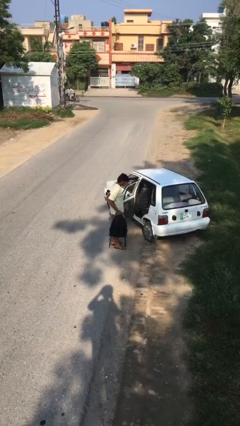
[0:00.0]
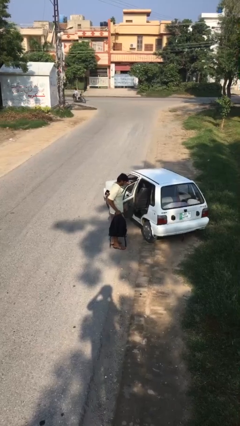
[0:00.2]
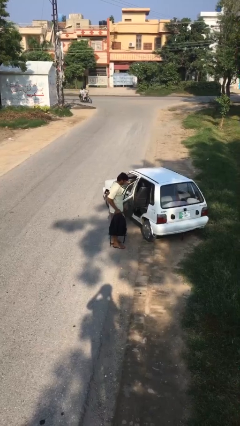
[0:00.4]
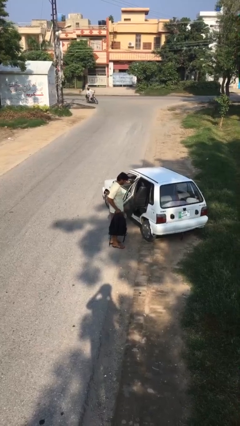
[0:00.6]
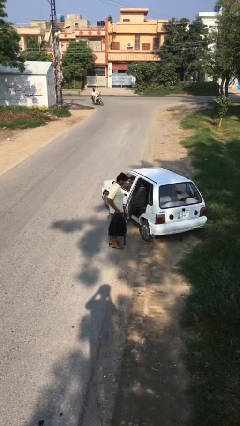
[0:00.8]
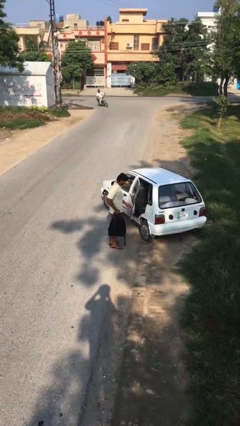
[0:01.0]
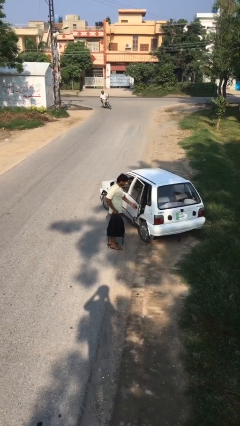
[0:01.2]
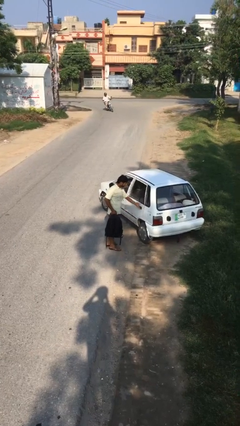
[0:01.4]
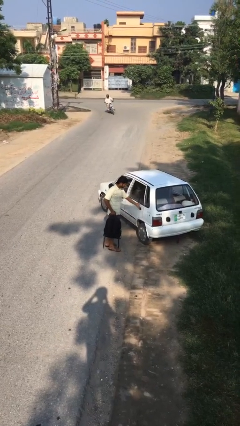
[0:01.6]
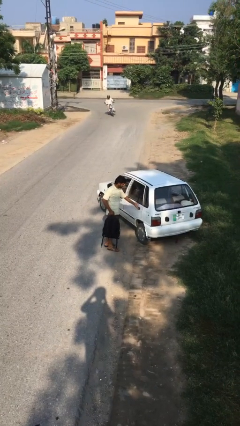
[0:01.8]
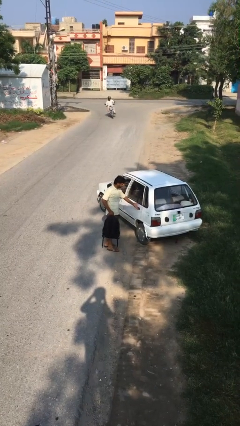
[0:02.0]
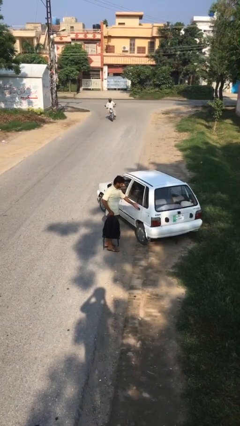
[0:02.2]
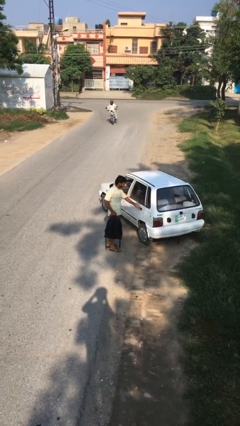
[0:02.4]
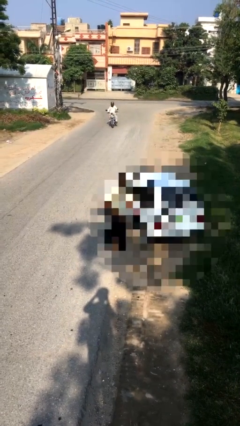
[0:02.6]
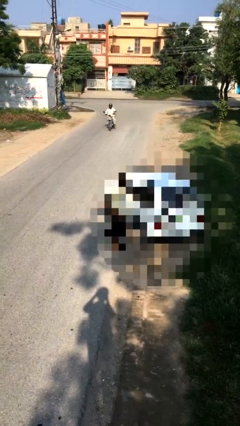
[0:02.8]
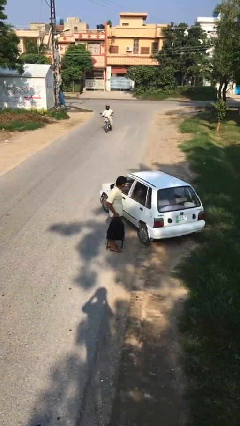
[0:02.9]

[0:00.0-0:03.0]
person closes car door

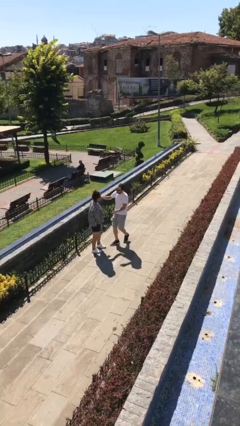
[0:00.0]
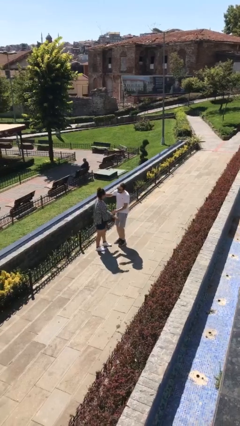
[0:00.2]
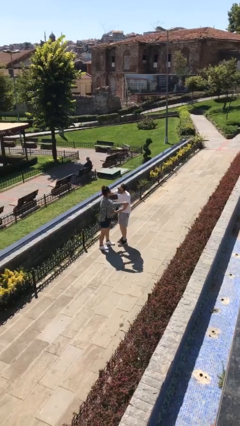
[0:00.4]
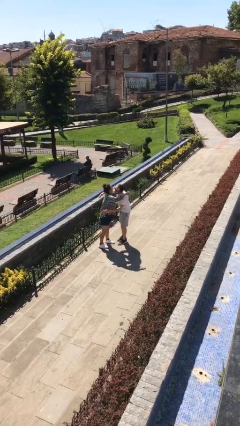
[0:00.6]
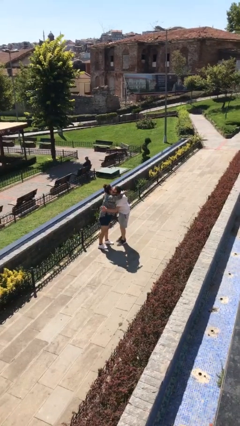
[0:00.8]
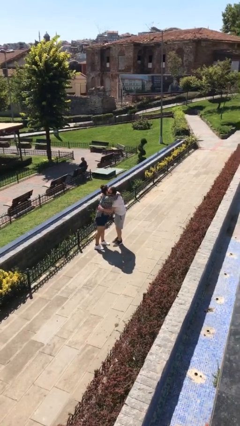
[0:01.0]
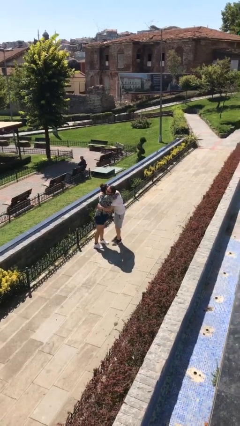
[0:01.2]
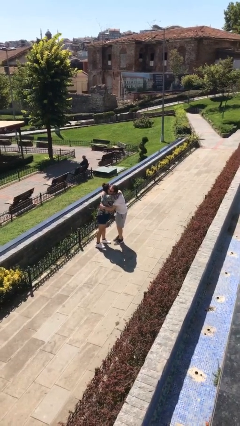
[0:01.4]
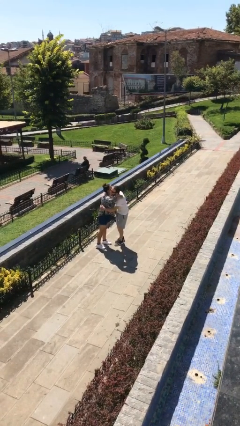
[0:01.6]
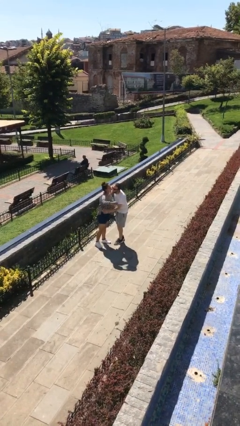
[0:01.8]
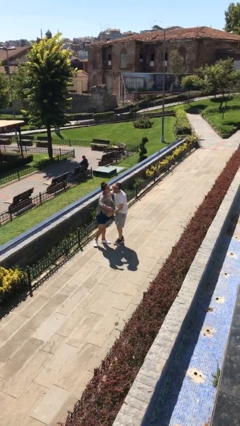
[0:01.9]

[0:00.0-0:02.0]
person embraces person

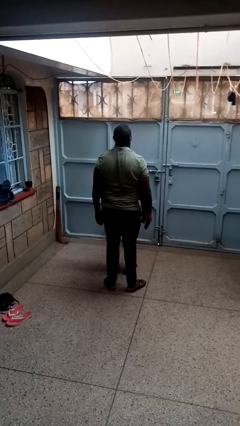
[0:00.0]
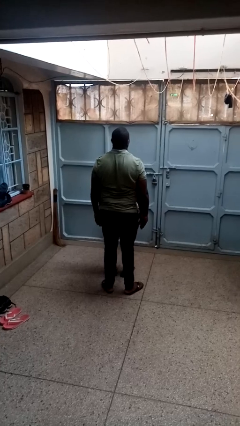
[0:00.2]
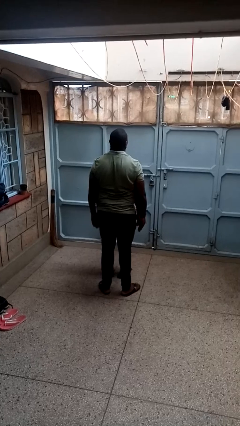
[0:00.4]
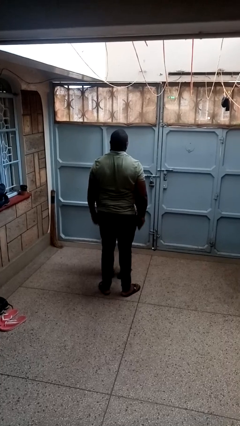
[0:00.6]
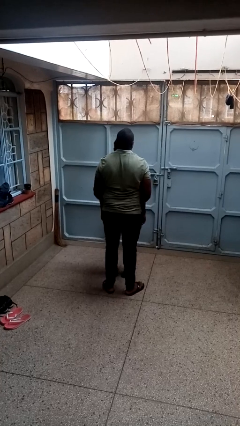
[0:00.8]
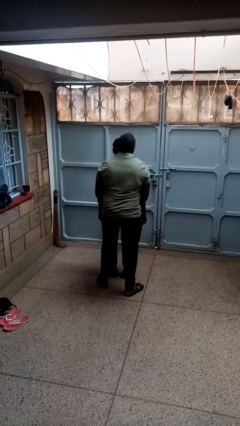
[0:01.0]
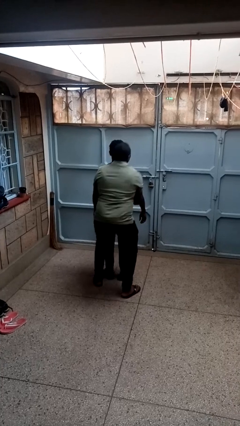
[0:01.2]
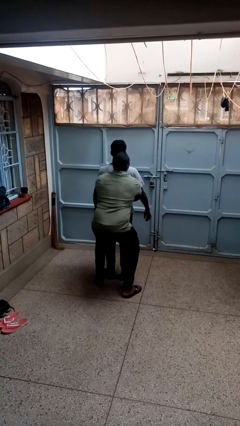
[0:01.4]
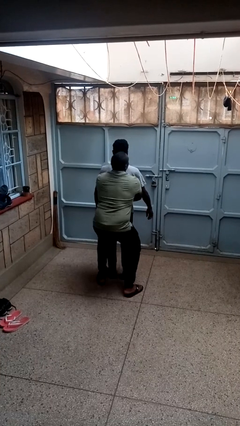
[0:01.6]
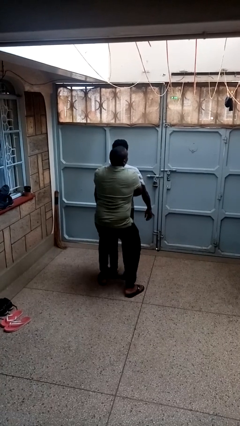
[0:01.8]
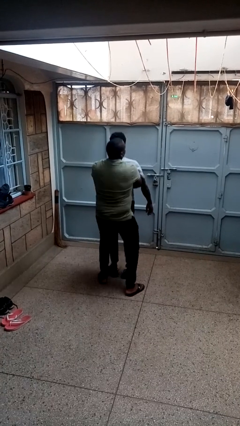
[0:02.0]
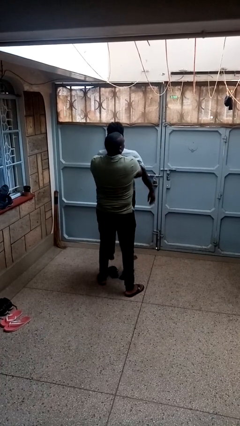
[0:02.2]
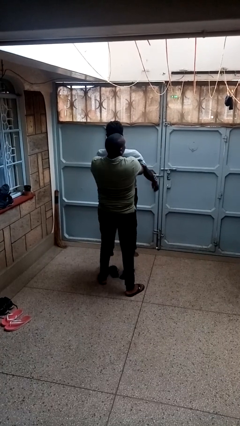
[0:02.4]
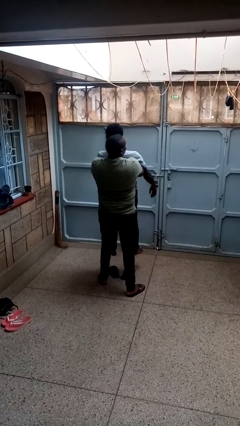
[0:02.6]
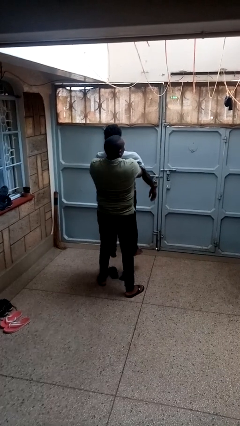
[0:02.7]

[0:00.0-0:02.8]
person picks up person

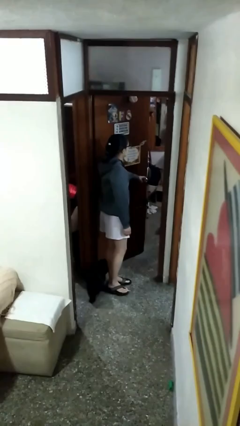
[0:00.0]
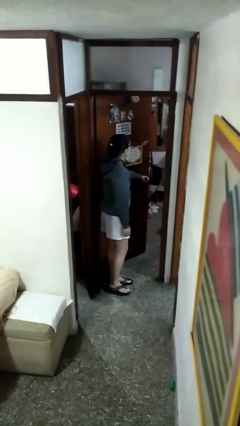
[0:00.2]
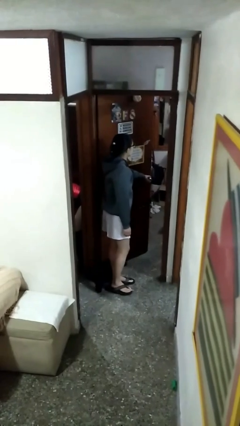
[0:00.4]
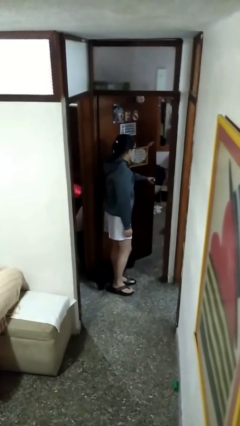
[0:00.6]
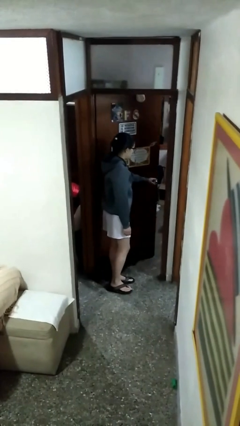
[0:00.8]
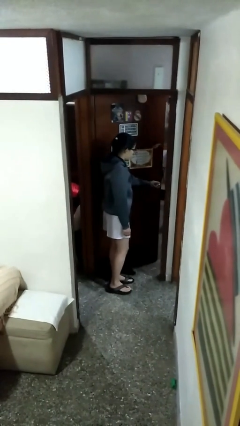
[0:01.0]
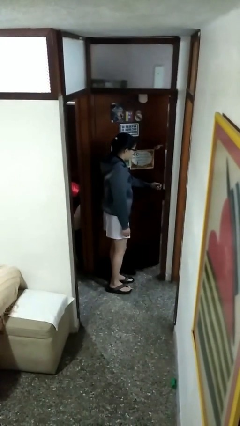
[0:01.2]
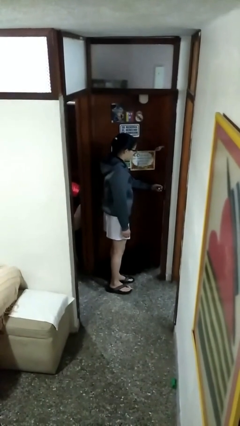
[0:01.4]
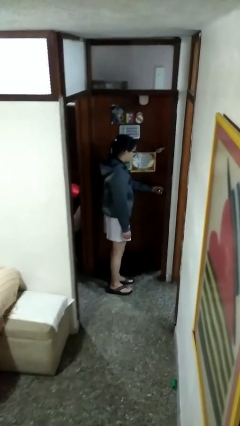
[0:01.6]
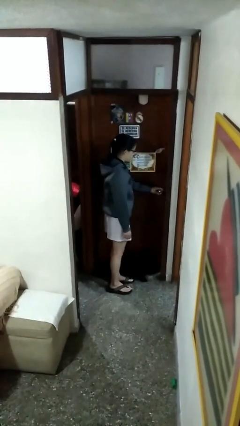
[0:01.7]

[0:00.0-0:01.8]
person closes facility door

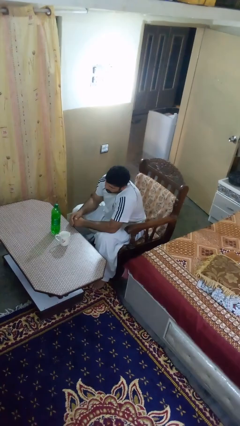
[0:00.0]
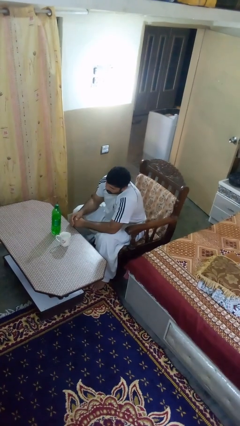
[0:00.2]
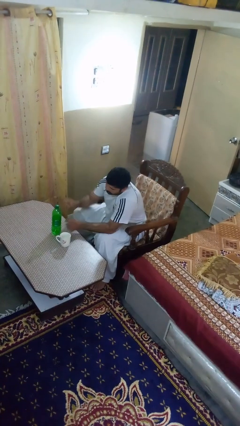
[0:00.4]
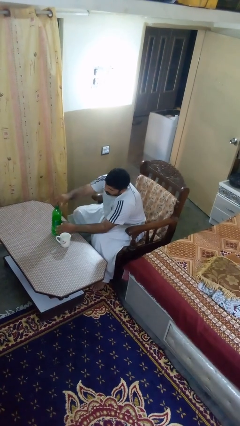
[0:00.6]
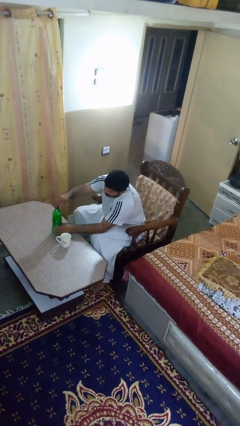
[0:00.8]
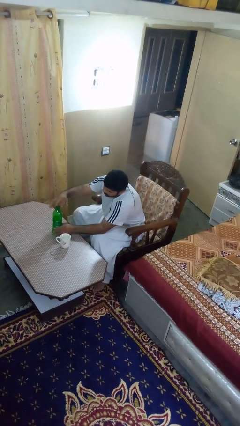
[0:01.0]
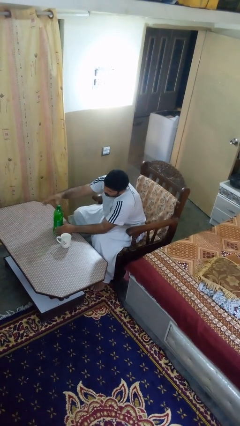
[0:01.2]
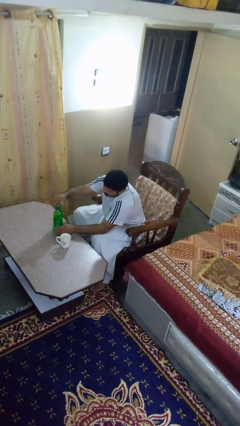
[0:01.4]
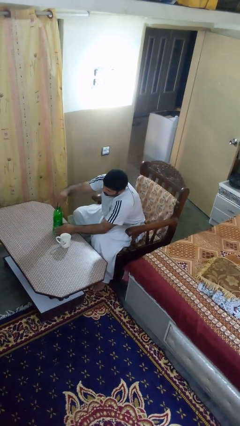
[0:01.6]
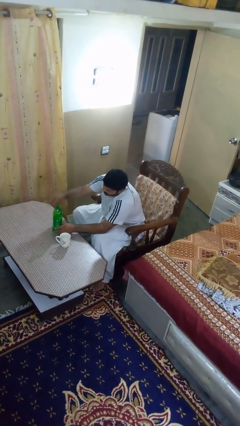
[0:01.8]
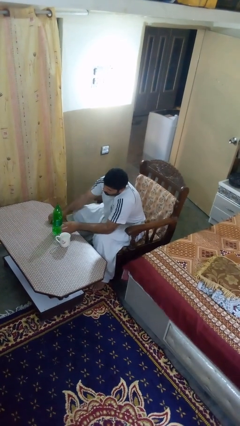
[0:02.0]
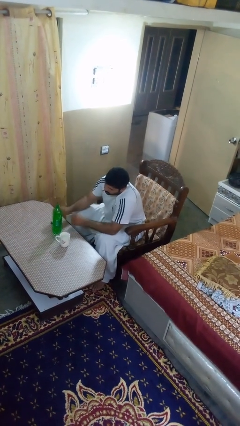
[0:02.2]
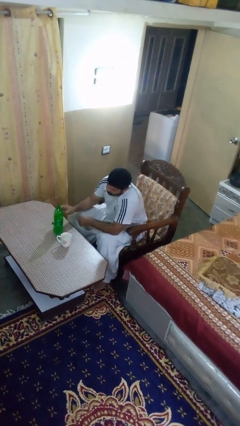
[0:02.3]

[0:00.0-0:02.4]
person unscrews lid from bottle

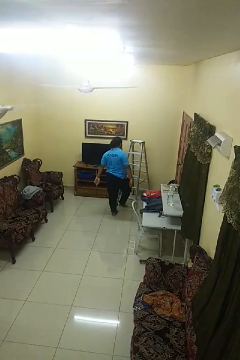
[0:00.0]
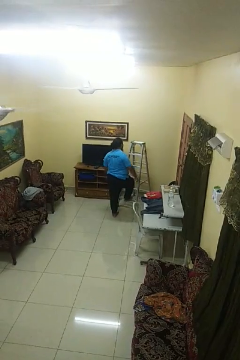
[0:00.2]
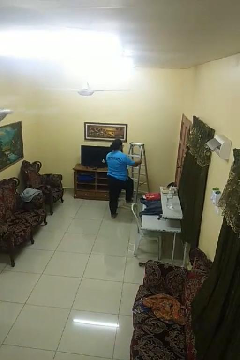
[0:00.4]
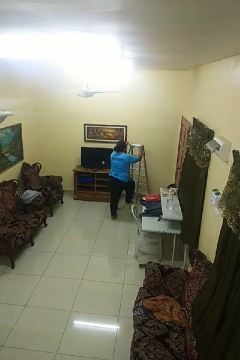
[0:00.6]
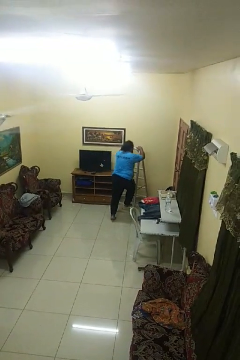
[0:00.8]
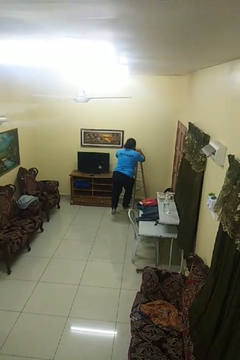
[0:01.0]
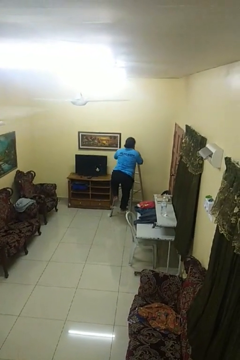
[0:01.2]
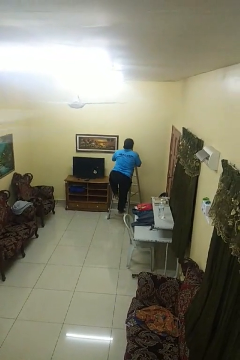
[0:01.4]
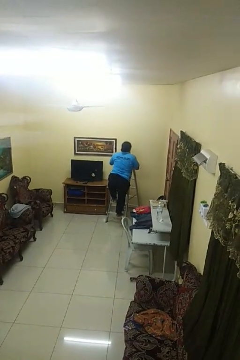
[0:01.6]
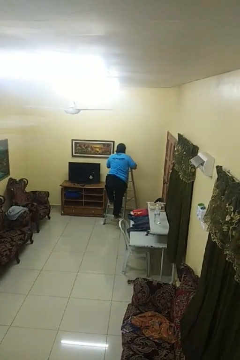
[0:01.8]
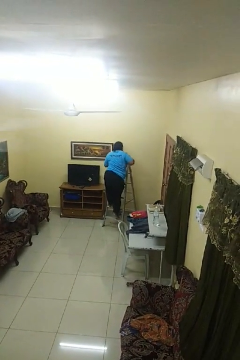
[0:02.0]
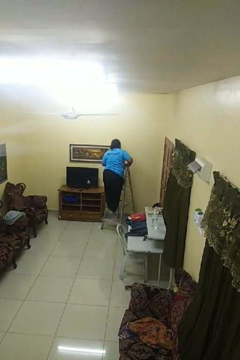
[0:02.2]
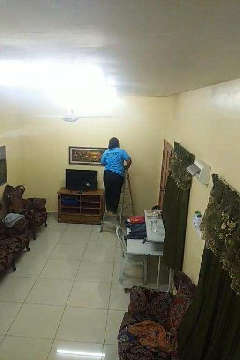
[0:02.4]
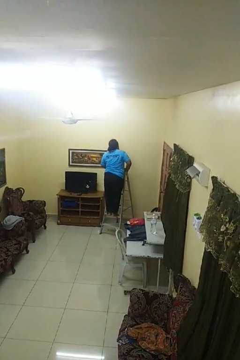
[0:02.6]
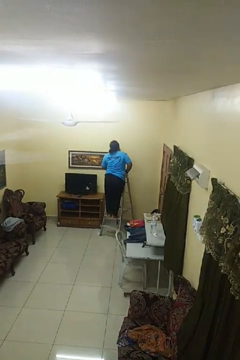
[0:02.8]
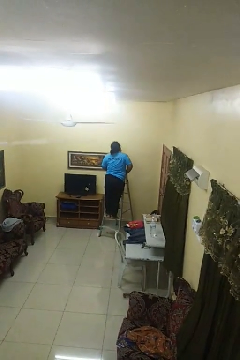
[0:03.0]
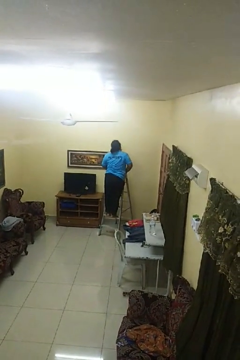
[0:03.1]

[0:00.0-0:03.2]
person climbs up ladder

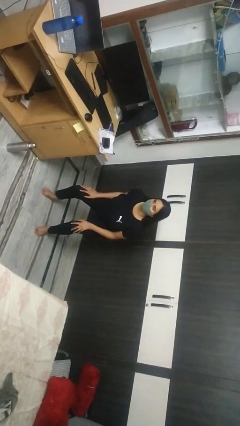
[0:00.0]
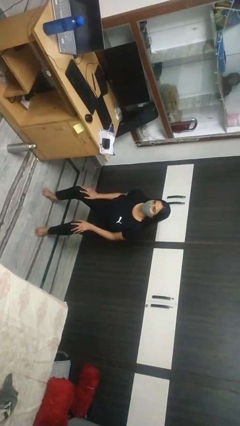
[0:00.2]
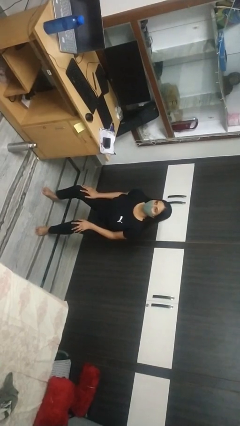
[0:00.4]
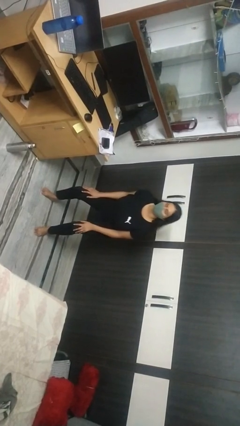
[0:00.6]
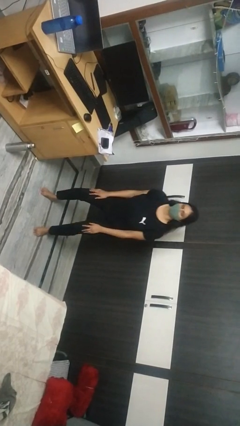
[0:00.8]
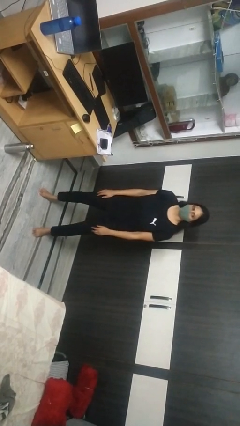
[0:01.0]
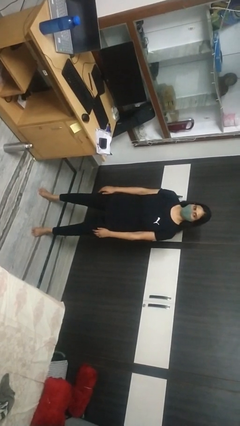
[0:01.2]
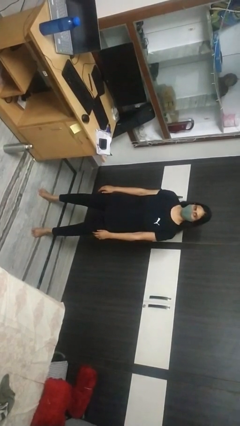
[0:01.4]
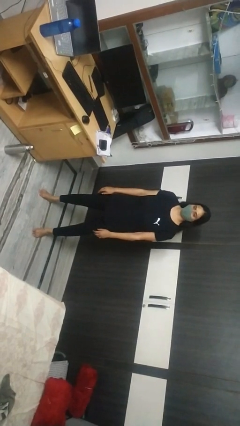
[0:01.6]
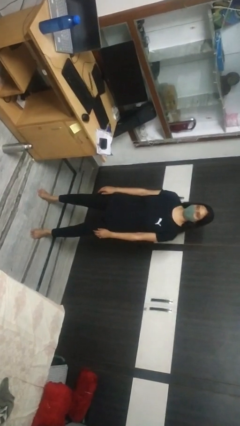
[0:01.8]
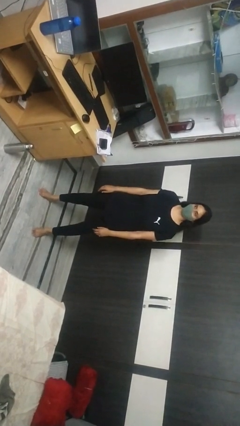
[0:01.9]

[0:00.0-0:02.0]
person stands up

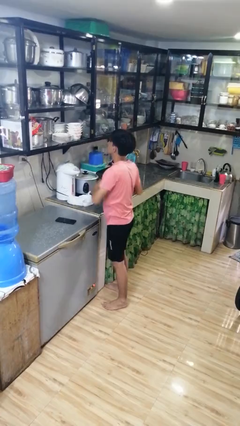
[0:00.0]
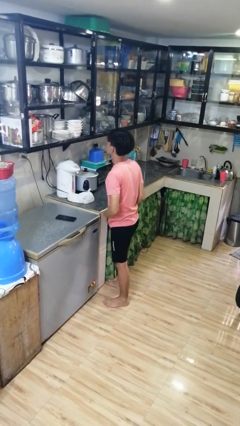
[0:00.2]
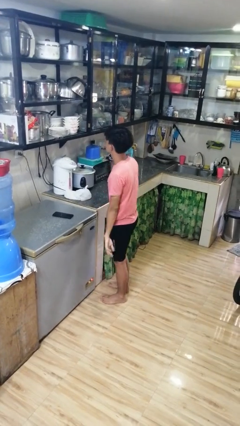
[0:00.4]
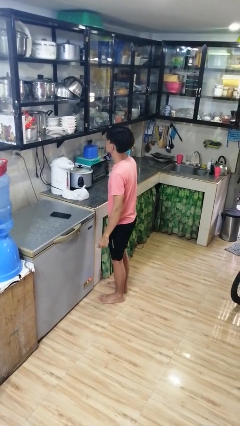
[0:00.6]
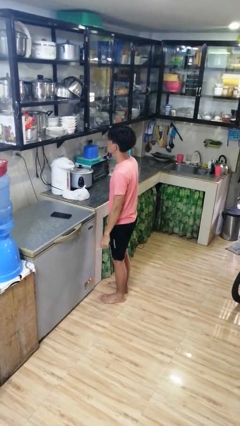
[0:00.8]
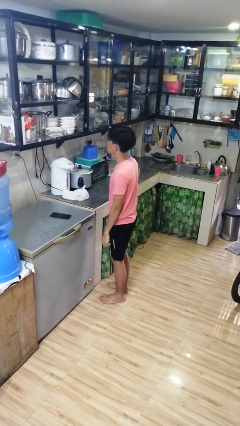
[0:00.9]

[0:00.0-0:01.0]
person takes off backpack
